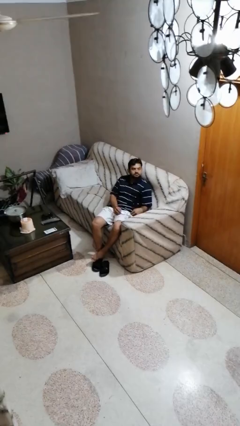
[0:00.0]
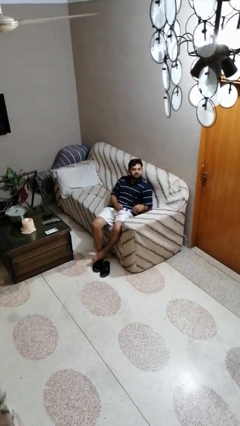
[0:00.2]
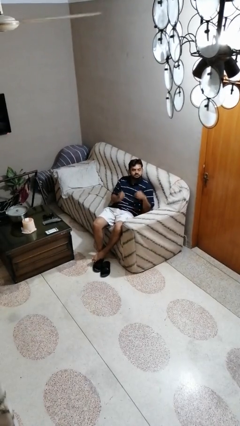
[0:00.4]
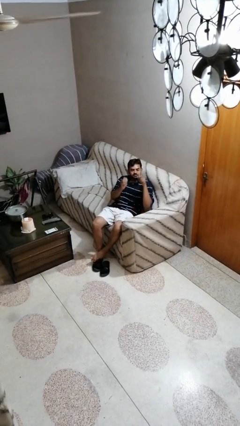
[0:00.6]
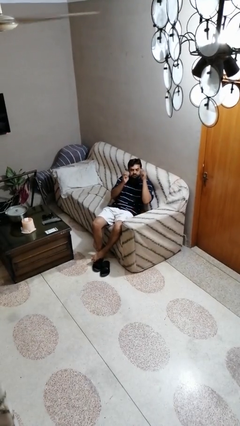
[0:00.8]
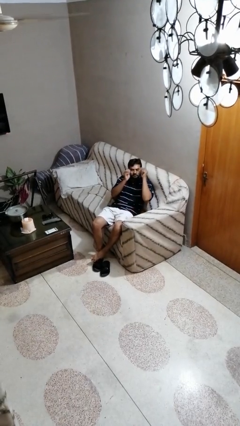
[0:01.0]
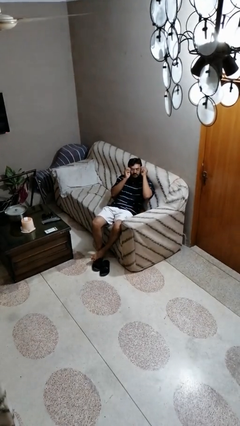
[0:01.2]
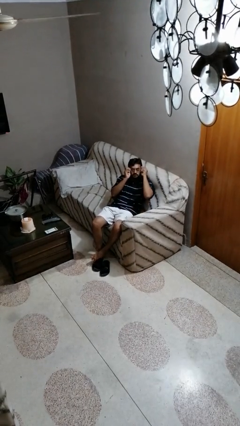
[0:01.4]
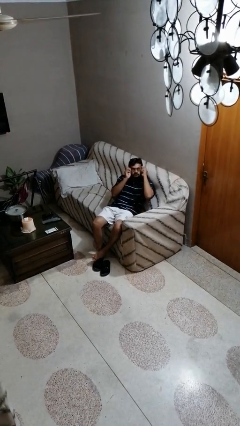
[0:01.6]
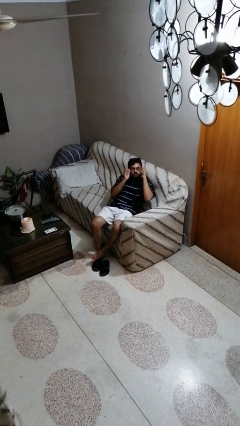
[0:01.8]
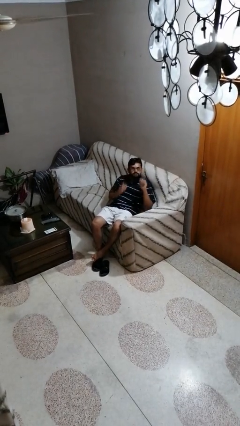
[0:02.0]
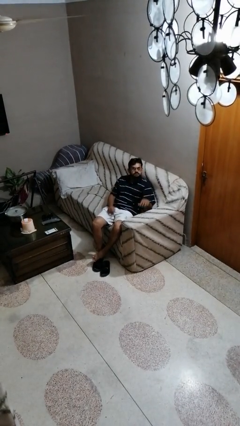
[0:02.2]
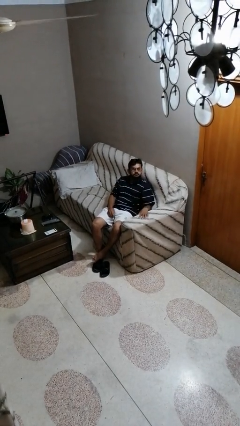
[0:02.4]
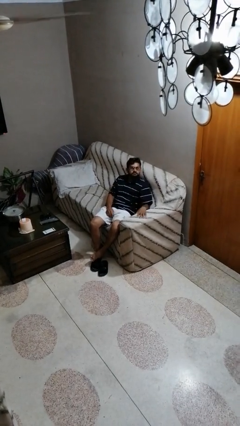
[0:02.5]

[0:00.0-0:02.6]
person puts on glasses

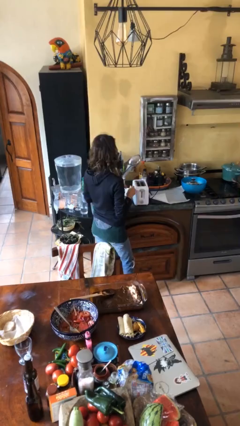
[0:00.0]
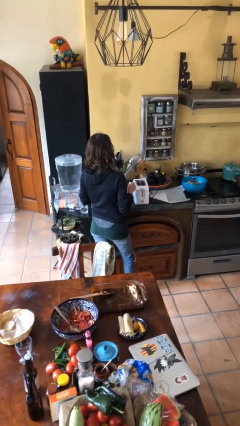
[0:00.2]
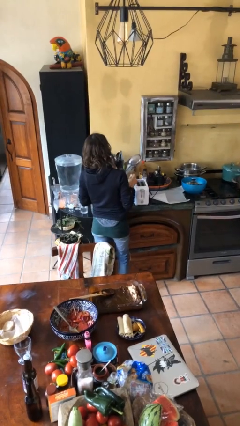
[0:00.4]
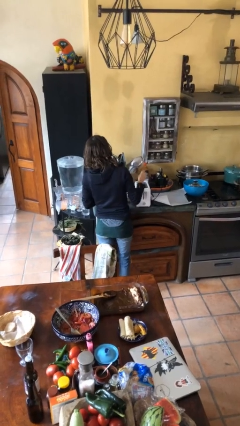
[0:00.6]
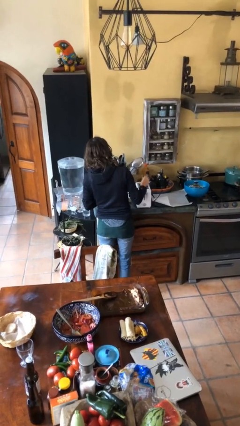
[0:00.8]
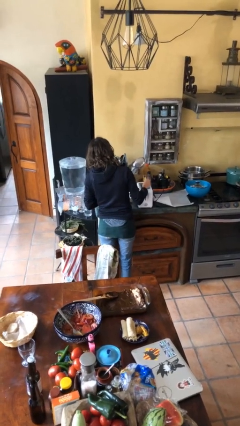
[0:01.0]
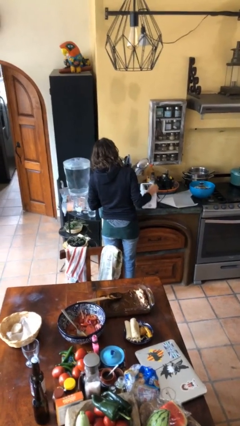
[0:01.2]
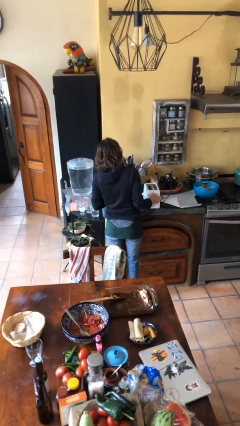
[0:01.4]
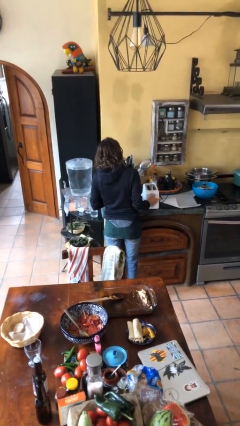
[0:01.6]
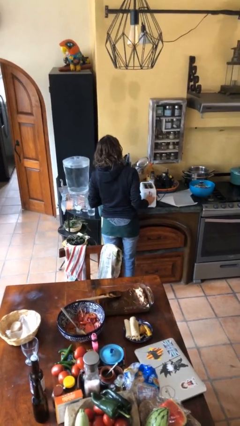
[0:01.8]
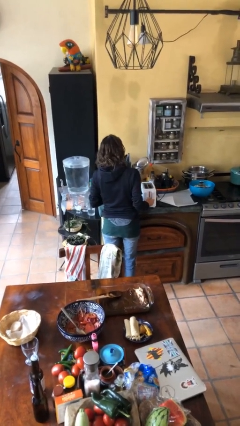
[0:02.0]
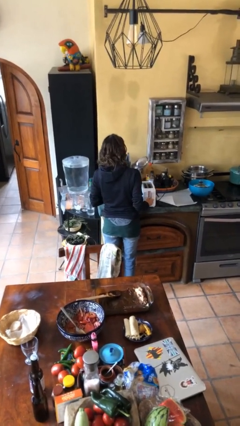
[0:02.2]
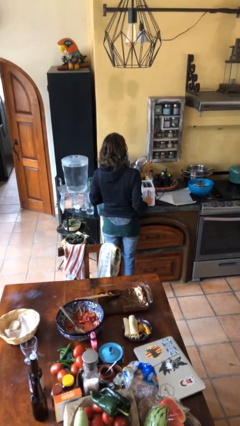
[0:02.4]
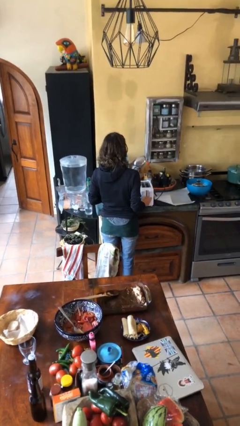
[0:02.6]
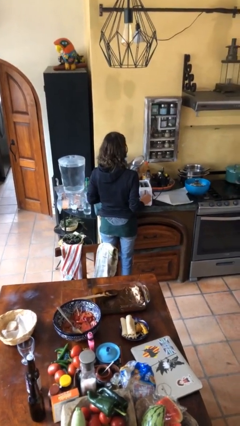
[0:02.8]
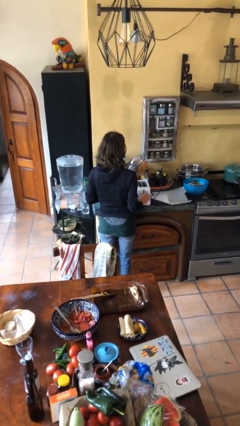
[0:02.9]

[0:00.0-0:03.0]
person puts object into toaster

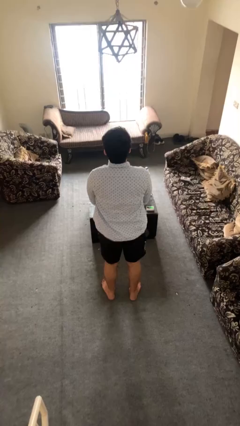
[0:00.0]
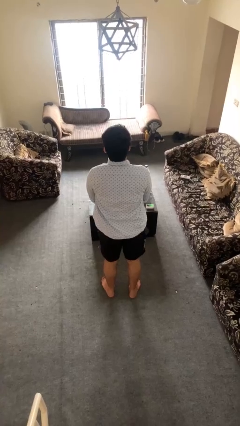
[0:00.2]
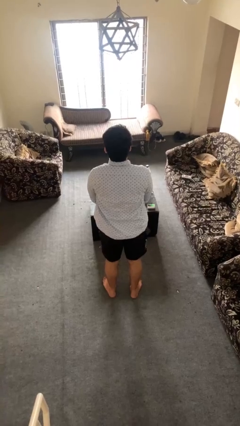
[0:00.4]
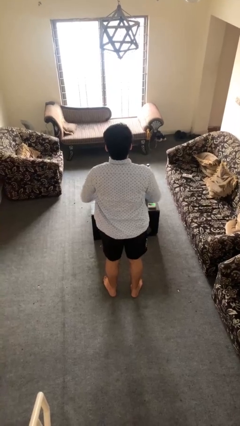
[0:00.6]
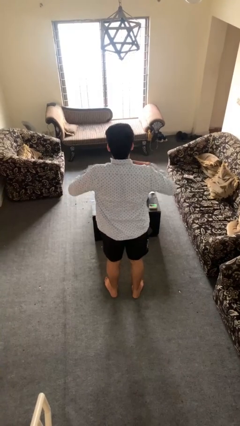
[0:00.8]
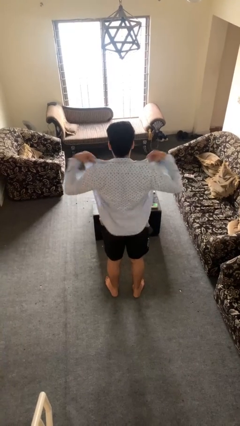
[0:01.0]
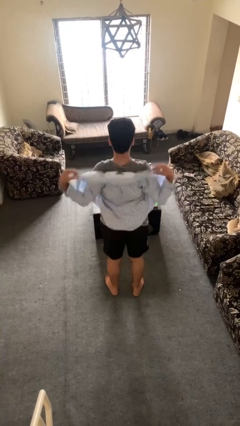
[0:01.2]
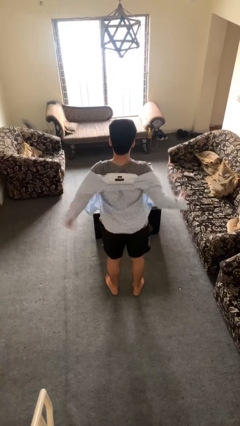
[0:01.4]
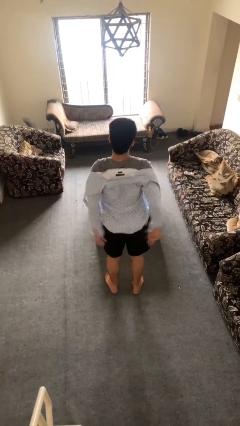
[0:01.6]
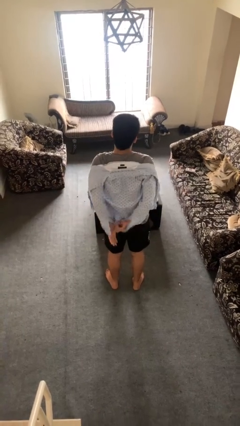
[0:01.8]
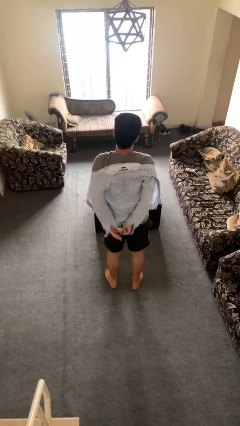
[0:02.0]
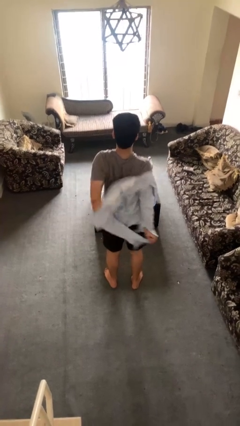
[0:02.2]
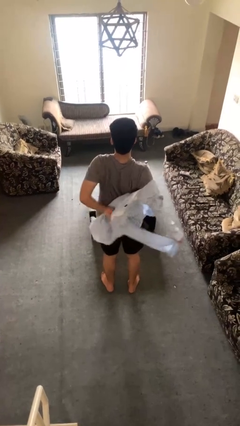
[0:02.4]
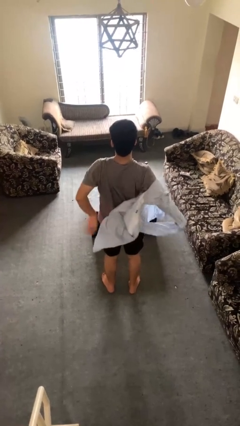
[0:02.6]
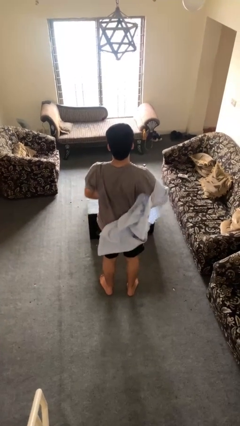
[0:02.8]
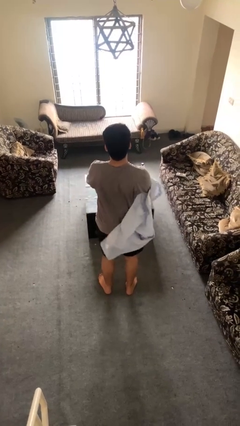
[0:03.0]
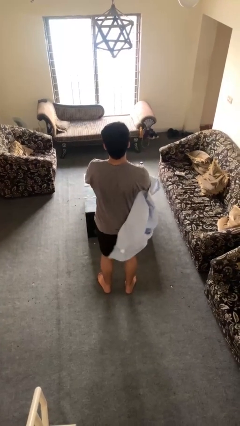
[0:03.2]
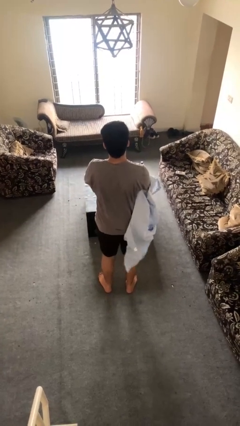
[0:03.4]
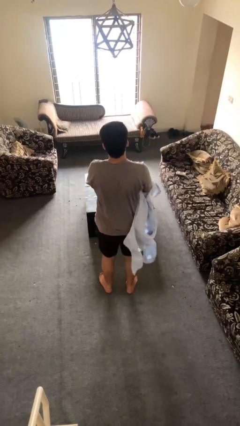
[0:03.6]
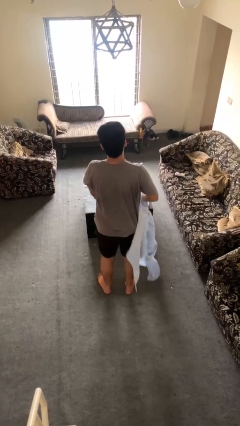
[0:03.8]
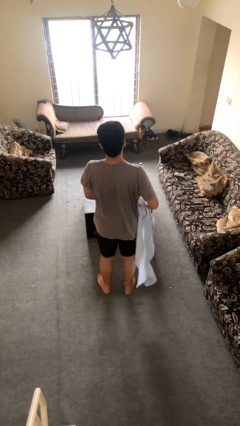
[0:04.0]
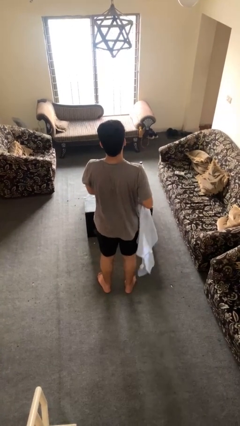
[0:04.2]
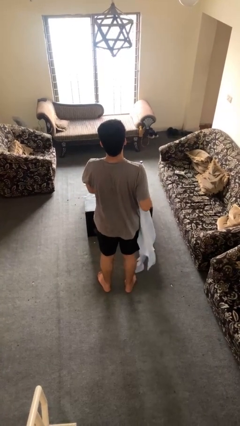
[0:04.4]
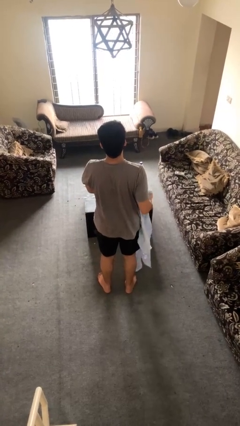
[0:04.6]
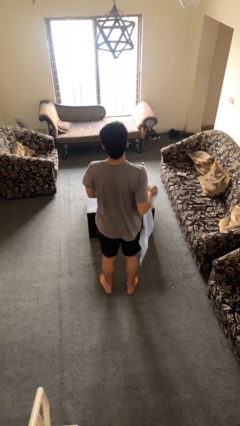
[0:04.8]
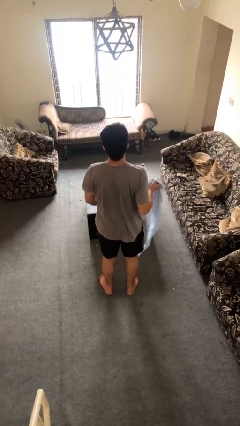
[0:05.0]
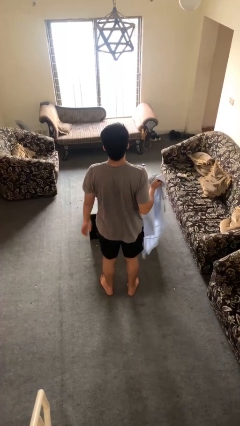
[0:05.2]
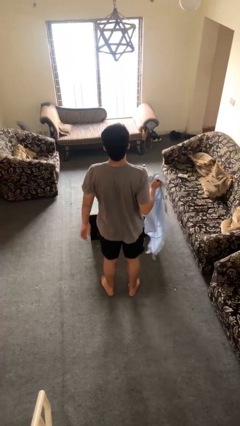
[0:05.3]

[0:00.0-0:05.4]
person takes off shirt

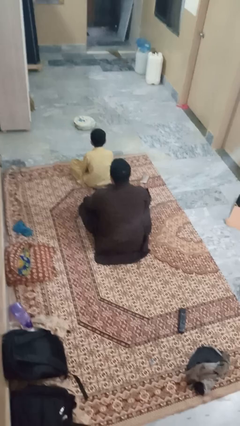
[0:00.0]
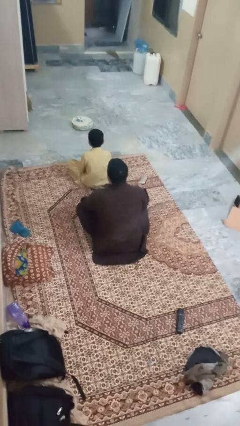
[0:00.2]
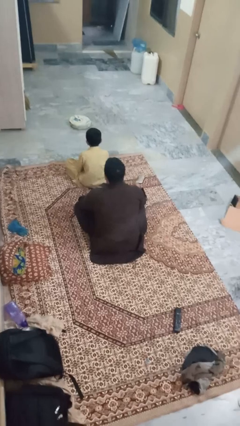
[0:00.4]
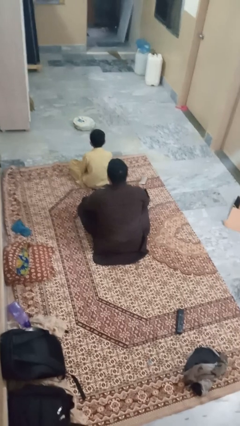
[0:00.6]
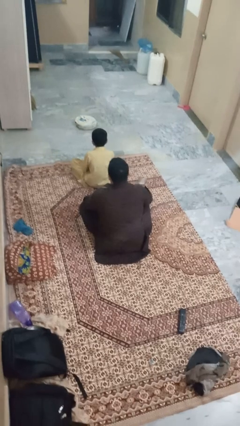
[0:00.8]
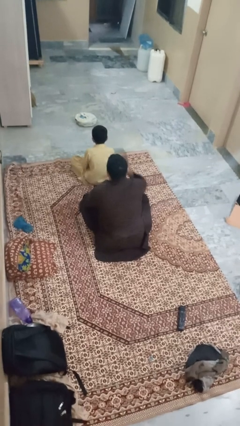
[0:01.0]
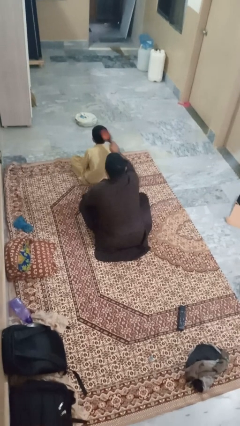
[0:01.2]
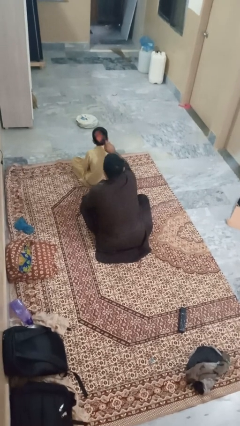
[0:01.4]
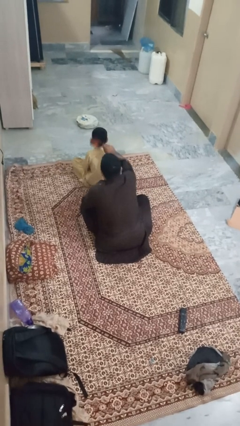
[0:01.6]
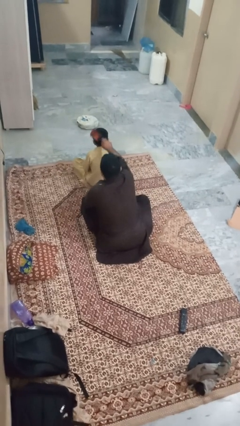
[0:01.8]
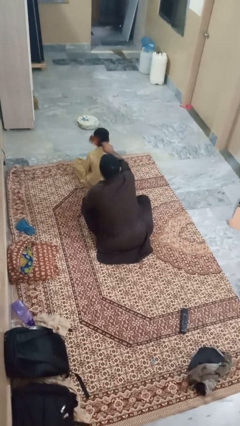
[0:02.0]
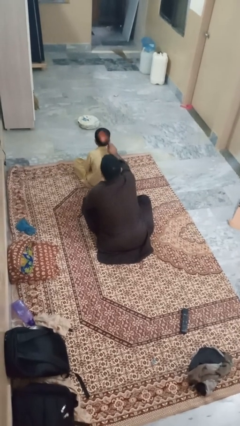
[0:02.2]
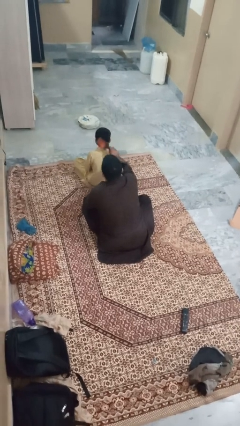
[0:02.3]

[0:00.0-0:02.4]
person brushes hair of person

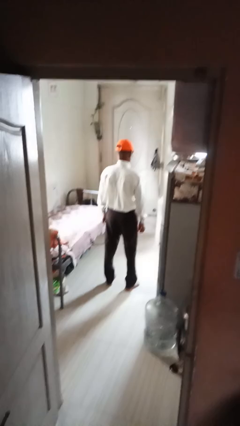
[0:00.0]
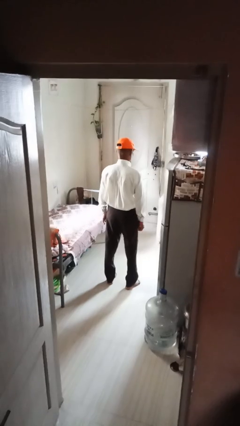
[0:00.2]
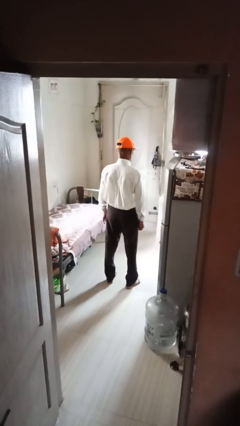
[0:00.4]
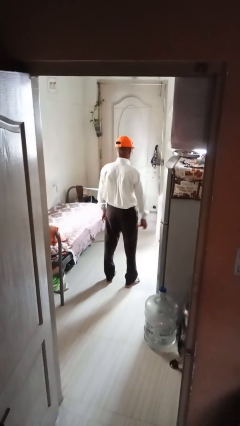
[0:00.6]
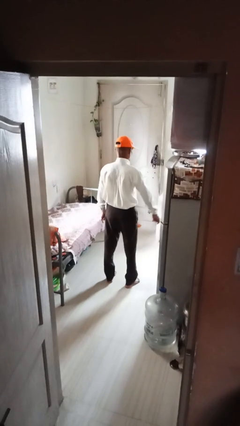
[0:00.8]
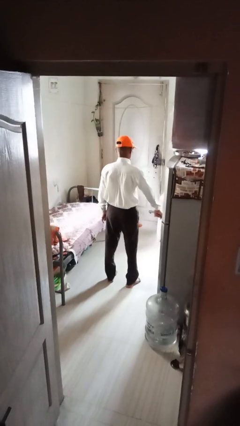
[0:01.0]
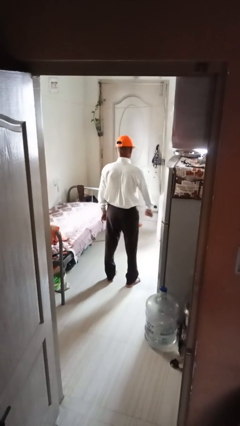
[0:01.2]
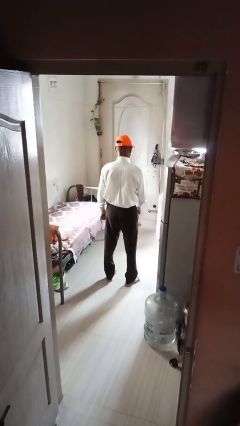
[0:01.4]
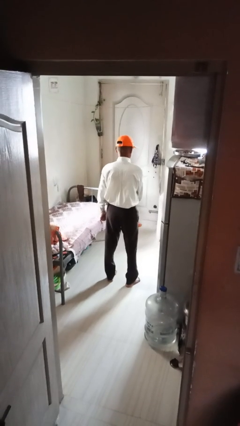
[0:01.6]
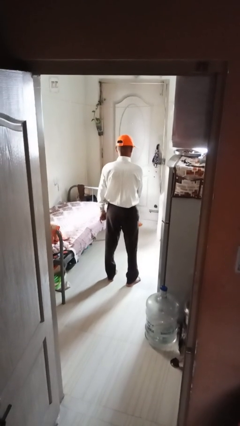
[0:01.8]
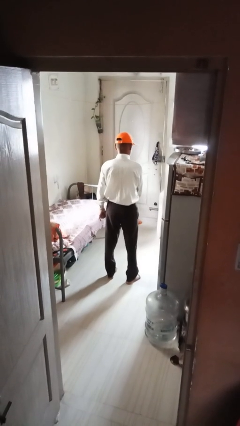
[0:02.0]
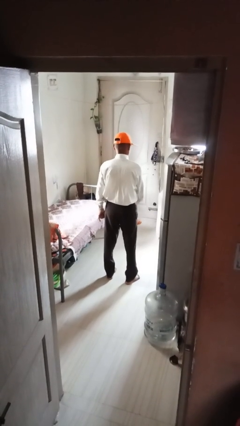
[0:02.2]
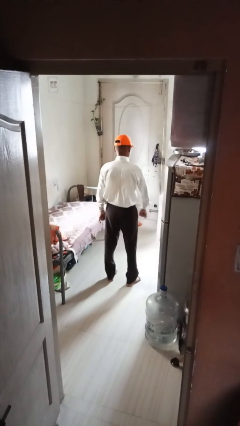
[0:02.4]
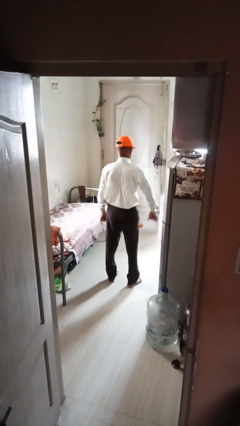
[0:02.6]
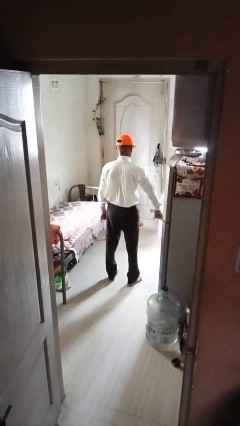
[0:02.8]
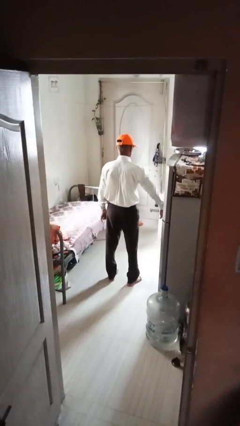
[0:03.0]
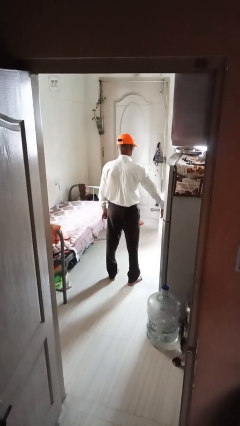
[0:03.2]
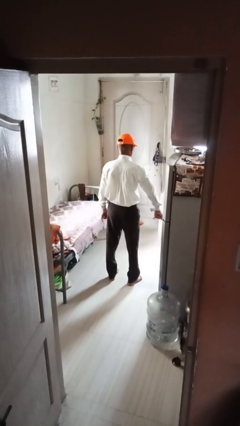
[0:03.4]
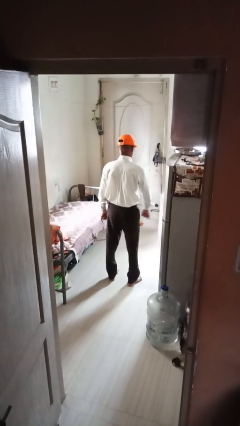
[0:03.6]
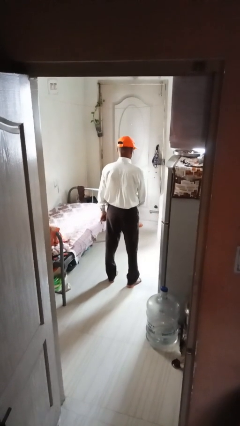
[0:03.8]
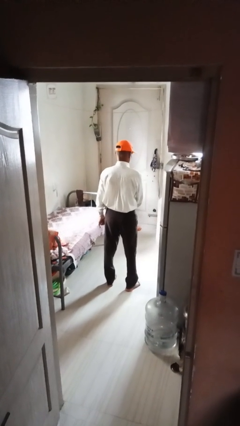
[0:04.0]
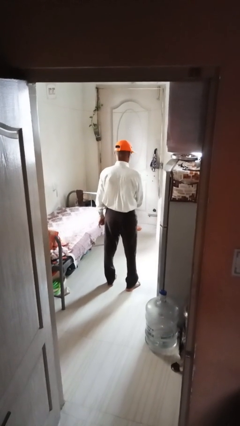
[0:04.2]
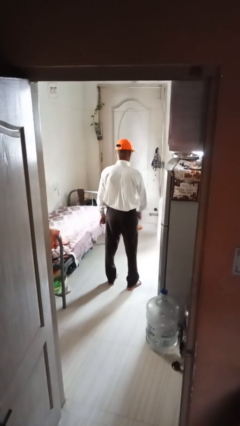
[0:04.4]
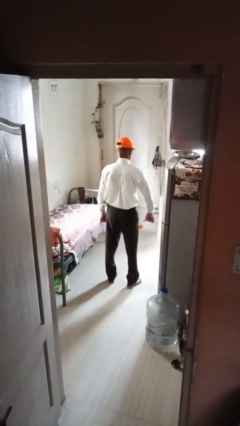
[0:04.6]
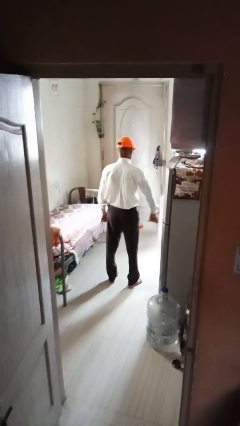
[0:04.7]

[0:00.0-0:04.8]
person gestures hang loose
